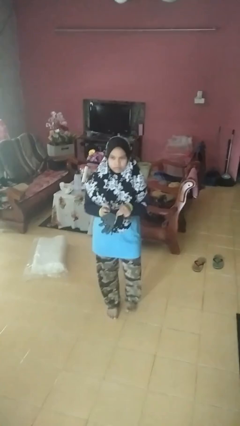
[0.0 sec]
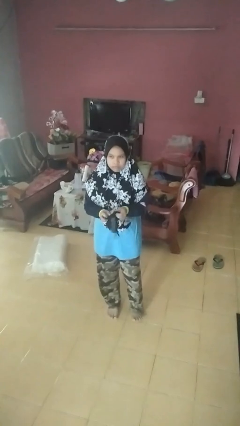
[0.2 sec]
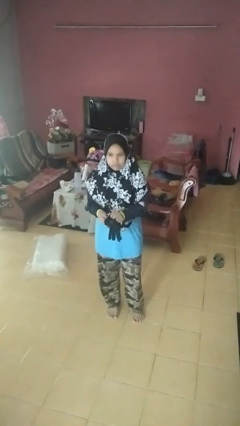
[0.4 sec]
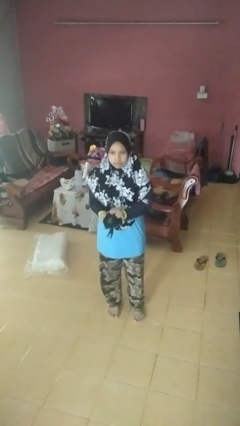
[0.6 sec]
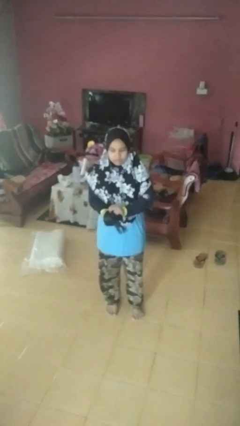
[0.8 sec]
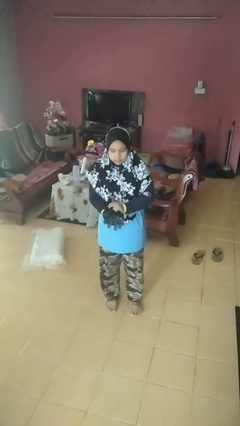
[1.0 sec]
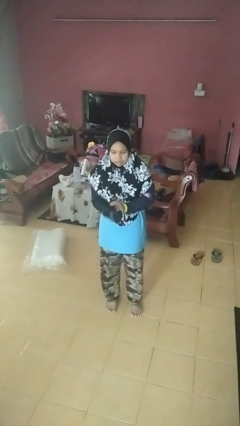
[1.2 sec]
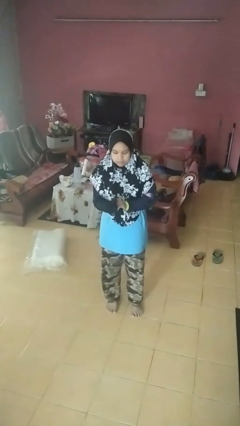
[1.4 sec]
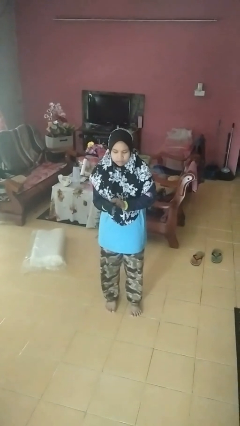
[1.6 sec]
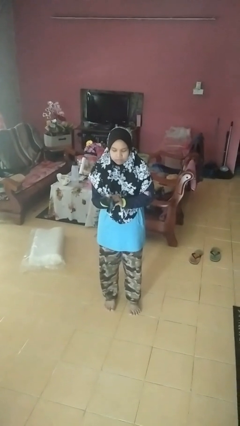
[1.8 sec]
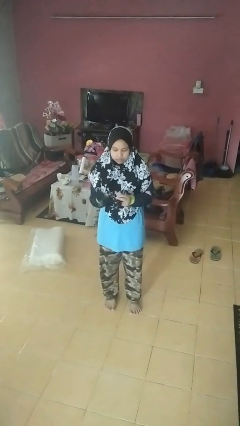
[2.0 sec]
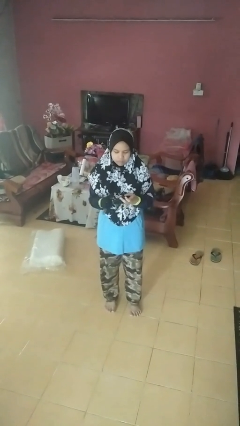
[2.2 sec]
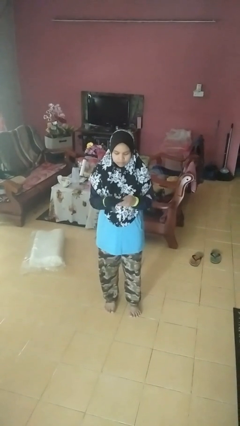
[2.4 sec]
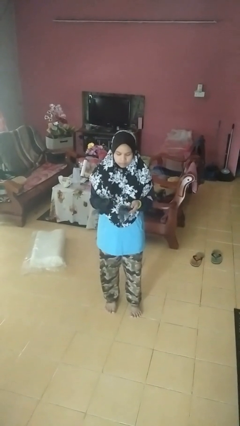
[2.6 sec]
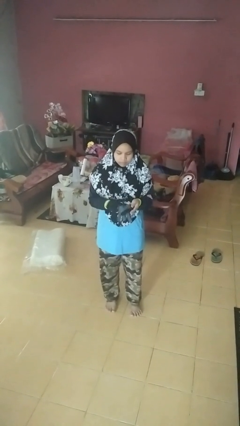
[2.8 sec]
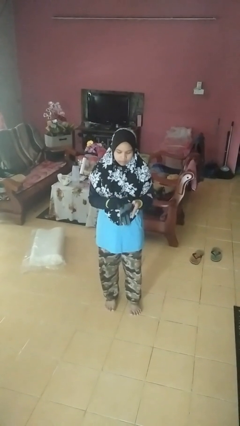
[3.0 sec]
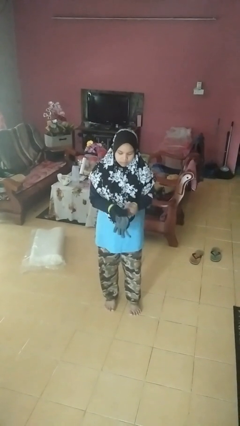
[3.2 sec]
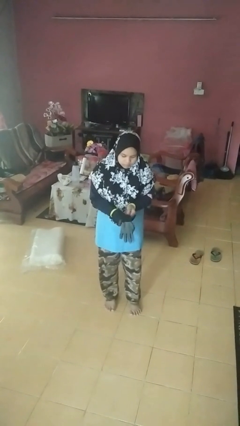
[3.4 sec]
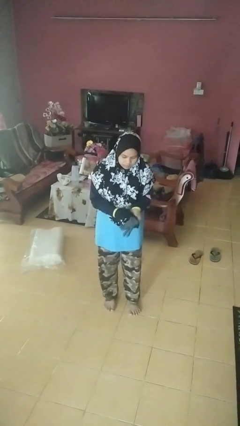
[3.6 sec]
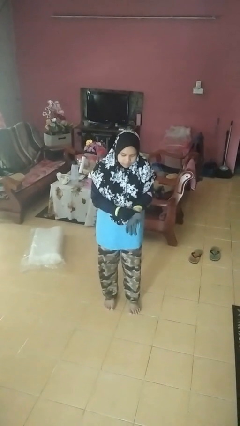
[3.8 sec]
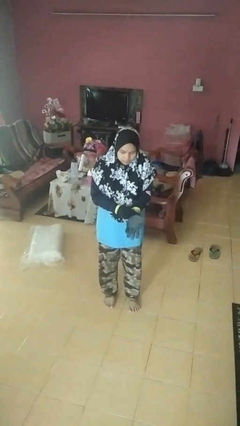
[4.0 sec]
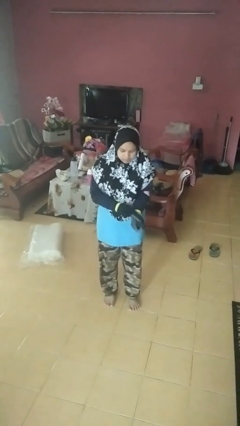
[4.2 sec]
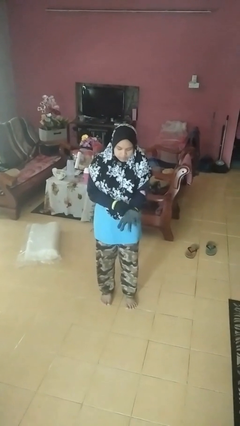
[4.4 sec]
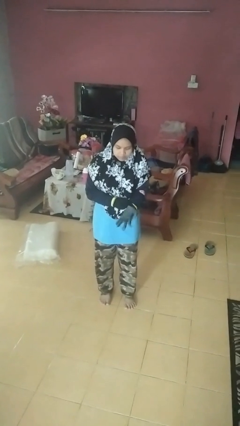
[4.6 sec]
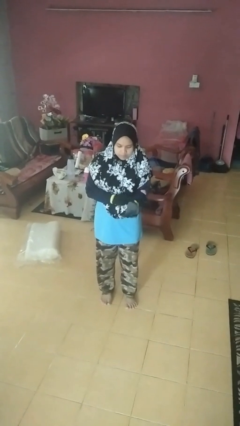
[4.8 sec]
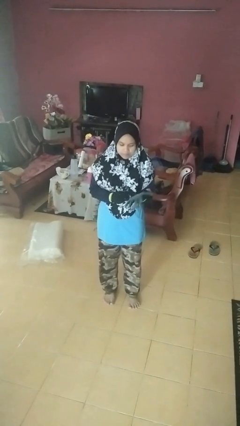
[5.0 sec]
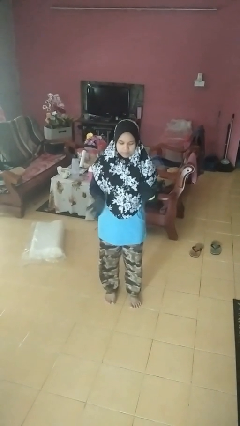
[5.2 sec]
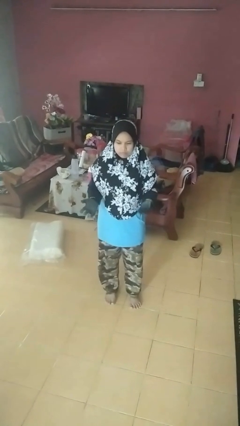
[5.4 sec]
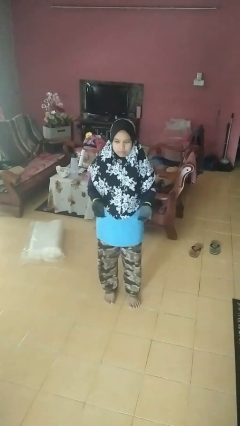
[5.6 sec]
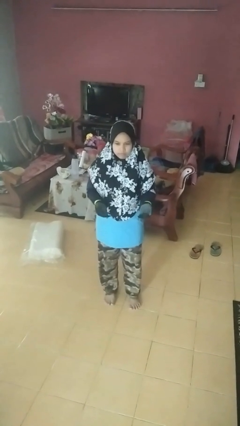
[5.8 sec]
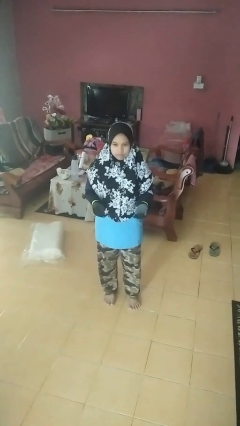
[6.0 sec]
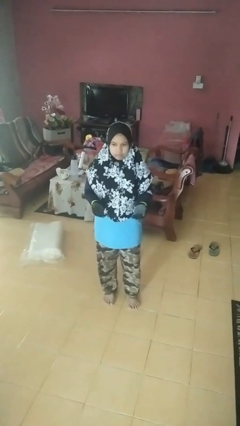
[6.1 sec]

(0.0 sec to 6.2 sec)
person puts on gloves

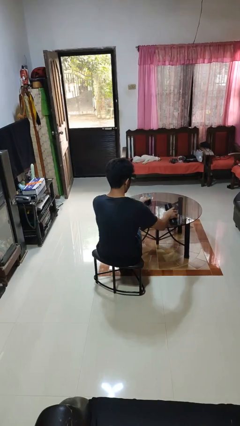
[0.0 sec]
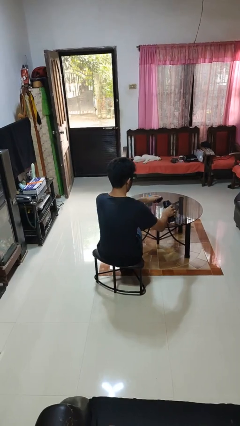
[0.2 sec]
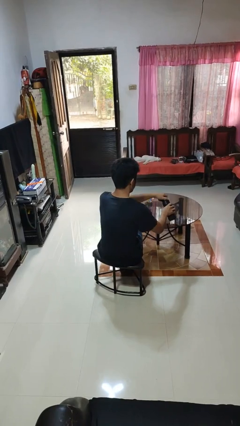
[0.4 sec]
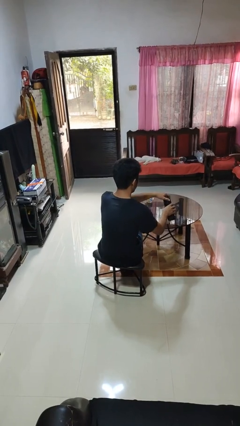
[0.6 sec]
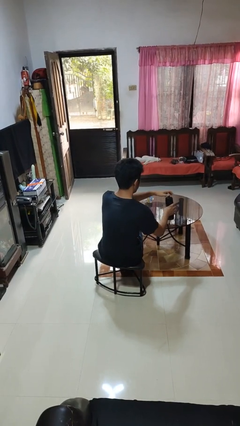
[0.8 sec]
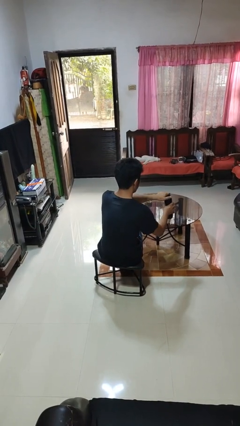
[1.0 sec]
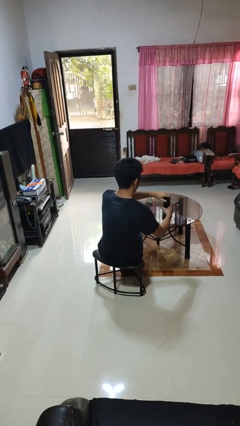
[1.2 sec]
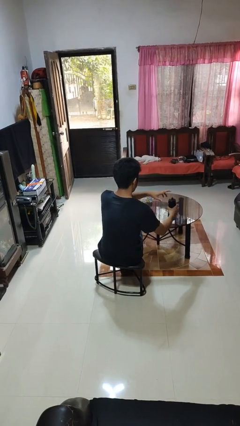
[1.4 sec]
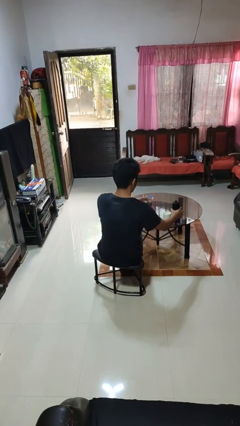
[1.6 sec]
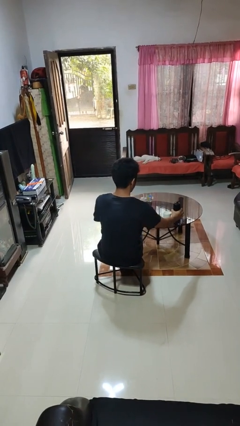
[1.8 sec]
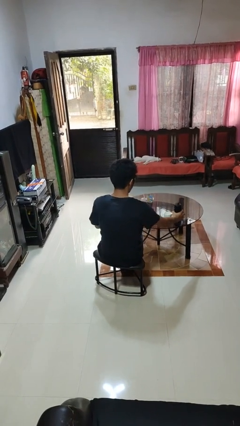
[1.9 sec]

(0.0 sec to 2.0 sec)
person screws lid to bottle

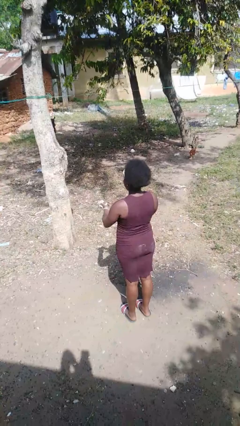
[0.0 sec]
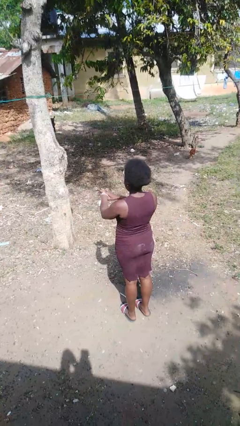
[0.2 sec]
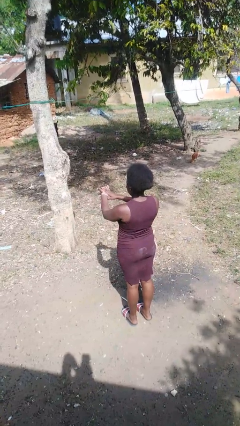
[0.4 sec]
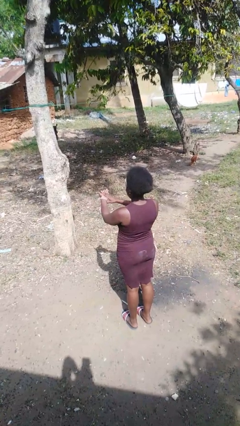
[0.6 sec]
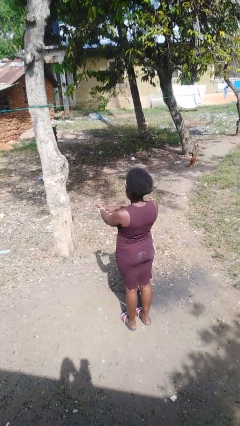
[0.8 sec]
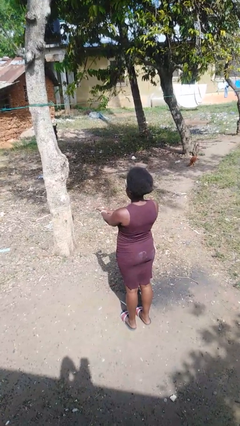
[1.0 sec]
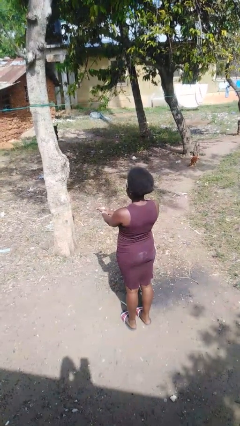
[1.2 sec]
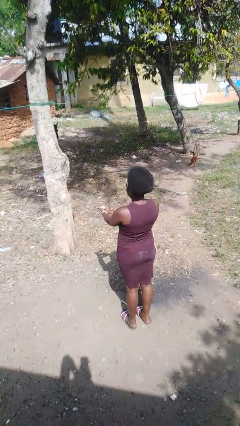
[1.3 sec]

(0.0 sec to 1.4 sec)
person gestures hang loose

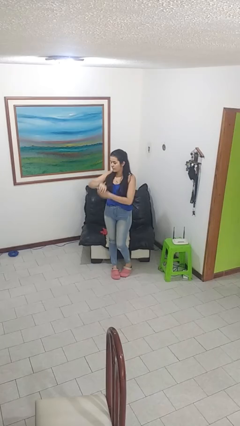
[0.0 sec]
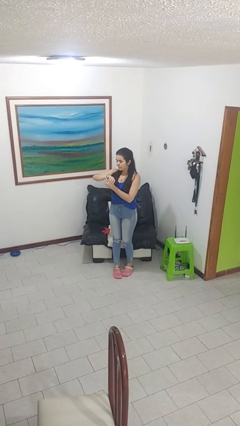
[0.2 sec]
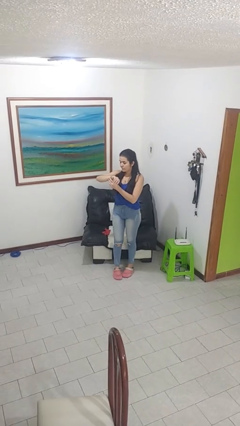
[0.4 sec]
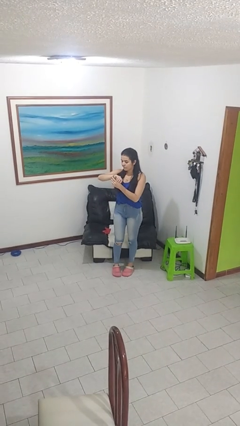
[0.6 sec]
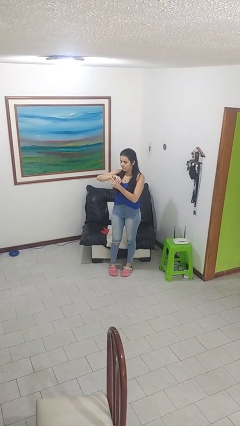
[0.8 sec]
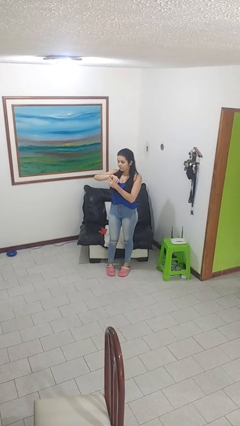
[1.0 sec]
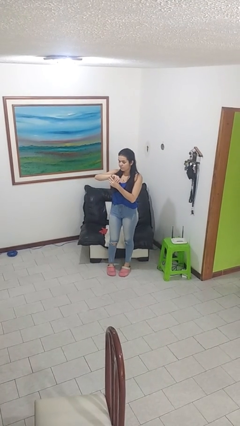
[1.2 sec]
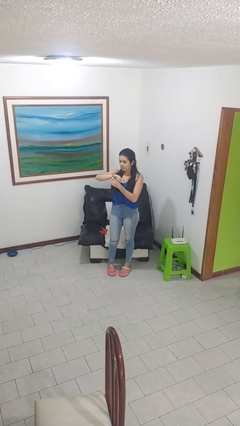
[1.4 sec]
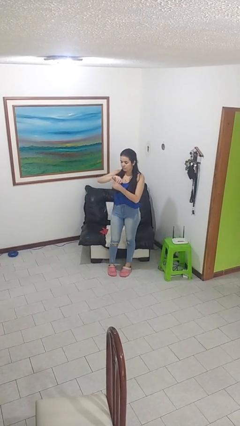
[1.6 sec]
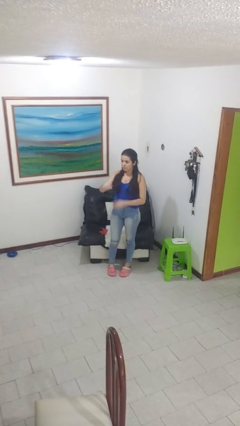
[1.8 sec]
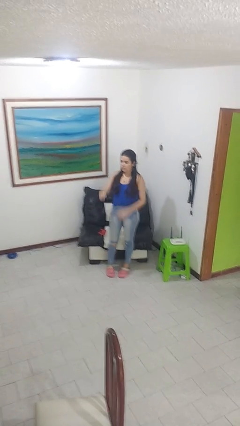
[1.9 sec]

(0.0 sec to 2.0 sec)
person looks at wristwatch

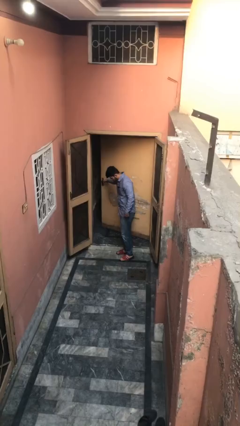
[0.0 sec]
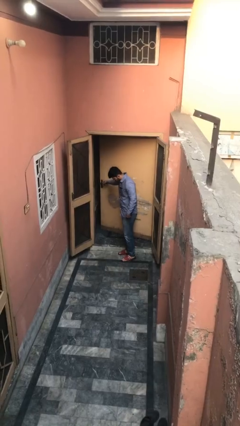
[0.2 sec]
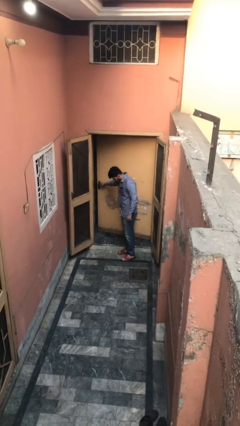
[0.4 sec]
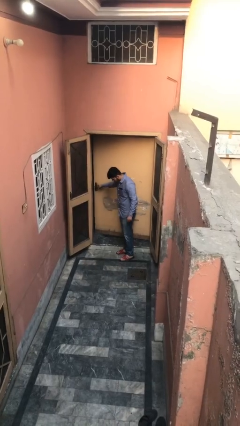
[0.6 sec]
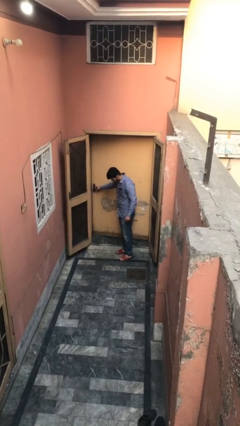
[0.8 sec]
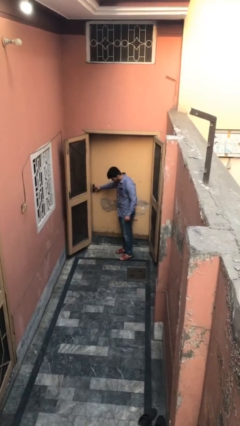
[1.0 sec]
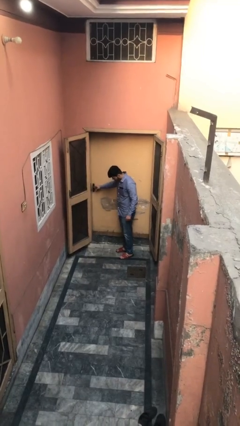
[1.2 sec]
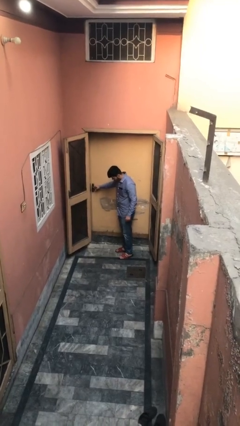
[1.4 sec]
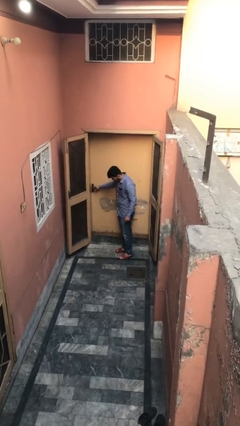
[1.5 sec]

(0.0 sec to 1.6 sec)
person closes facility door

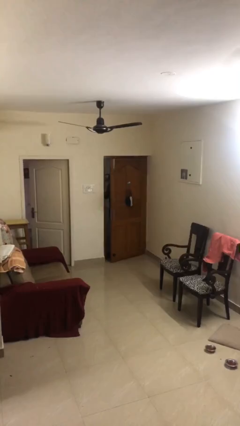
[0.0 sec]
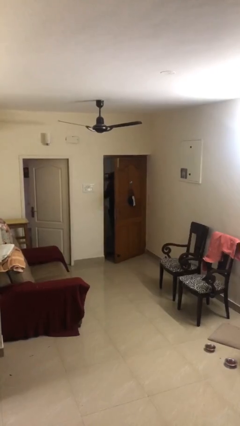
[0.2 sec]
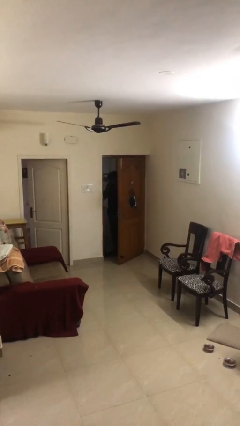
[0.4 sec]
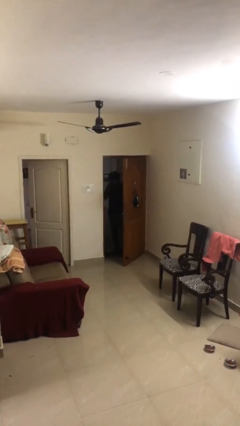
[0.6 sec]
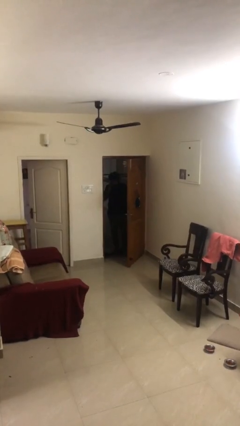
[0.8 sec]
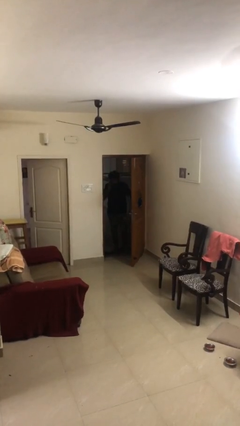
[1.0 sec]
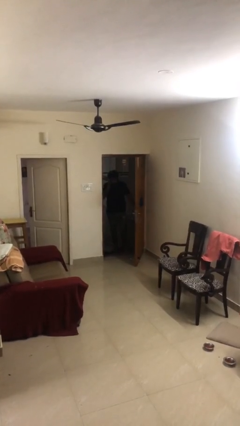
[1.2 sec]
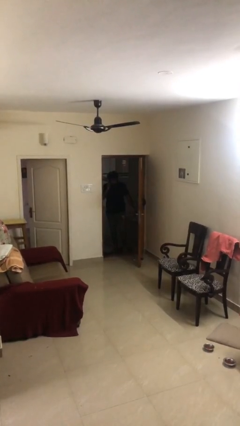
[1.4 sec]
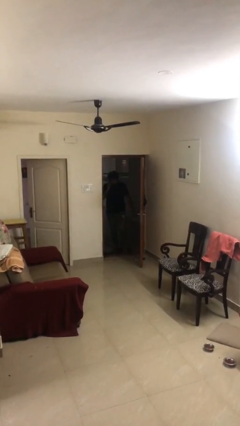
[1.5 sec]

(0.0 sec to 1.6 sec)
person opens facility door

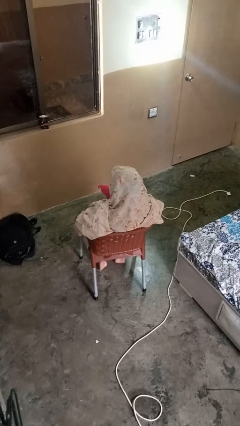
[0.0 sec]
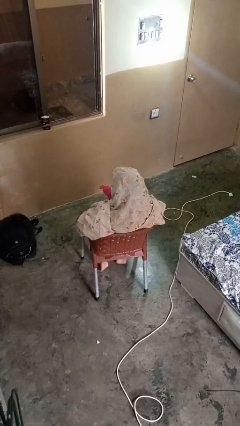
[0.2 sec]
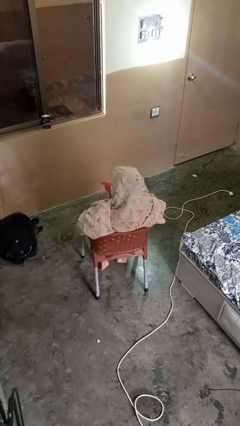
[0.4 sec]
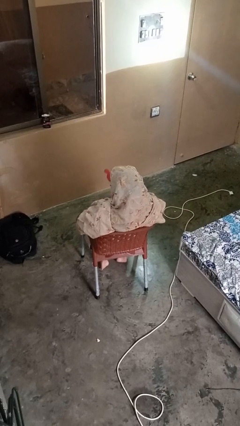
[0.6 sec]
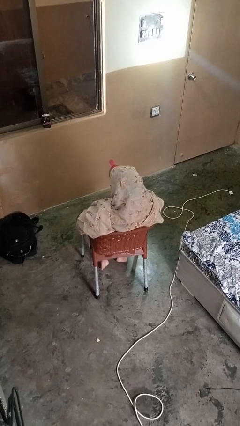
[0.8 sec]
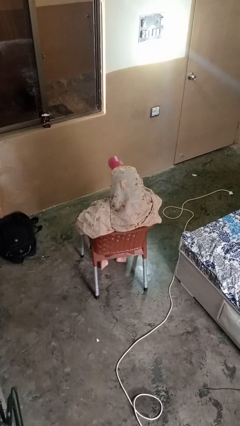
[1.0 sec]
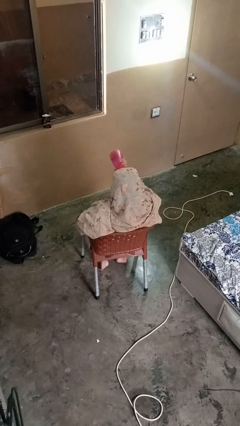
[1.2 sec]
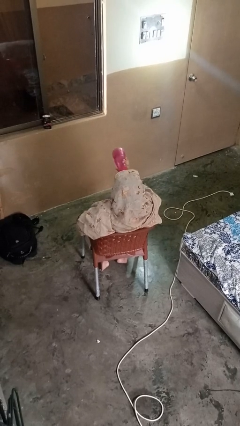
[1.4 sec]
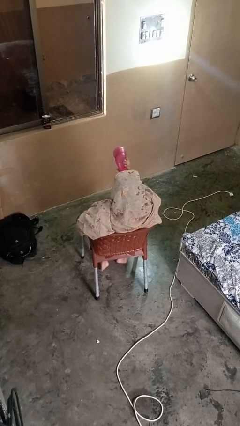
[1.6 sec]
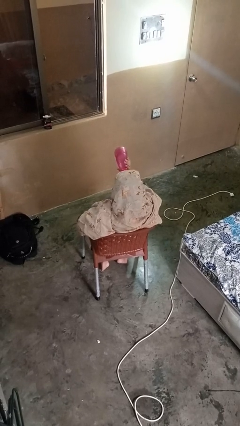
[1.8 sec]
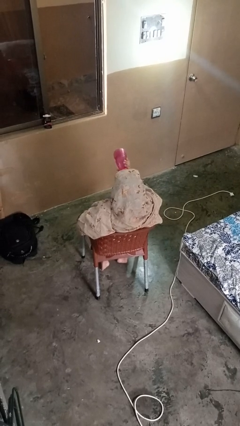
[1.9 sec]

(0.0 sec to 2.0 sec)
person drinks from bottle

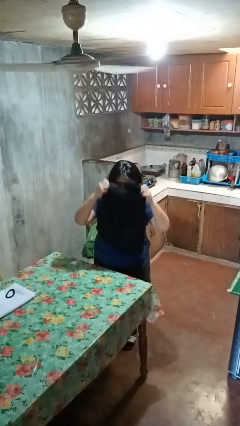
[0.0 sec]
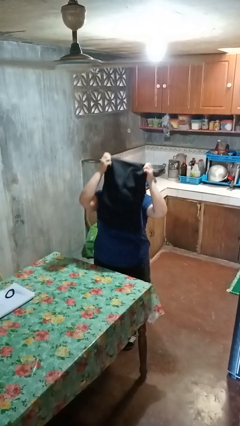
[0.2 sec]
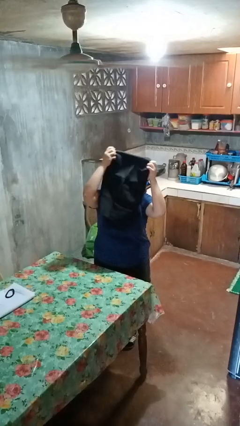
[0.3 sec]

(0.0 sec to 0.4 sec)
person takes off apron
